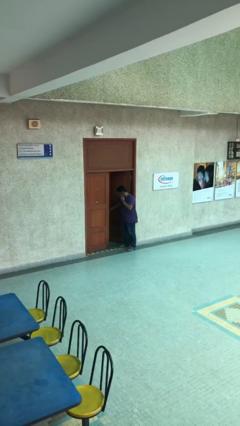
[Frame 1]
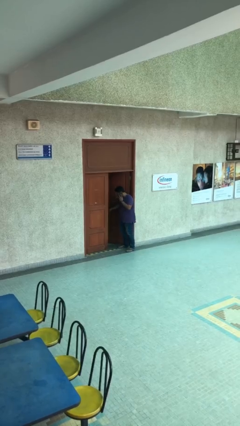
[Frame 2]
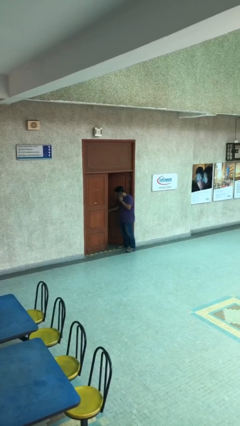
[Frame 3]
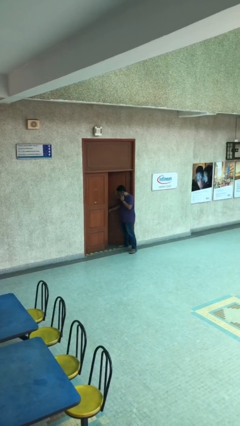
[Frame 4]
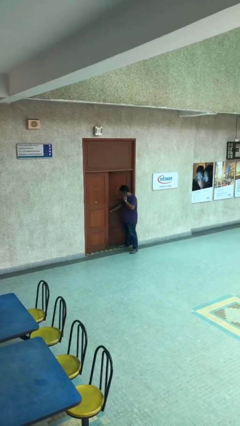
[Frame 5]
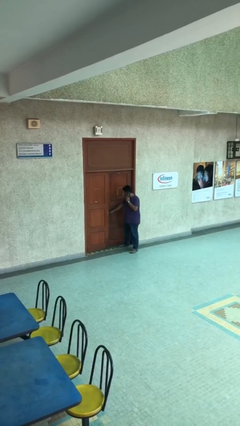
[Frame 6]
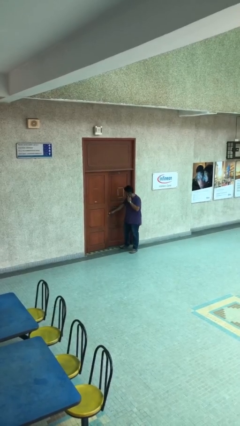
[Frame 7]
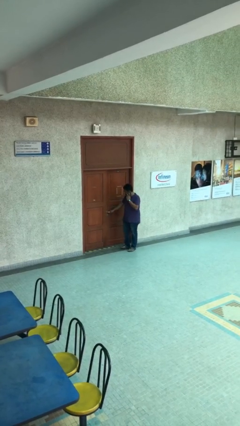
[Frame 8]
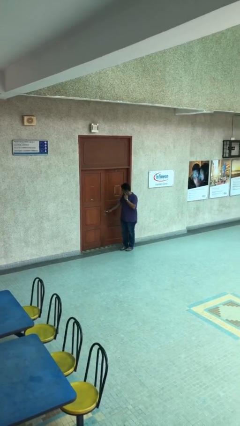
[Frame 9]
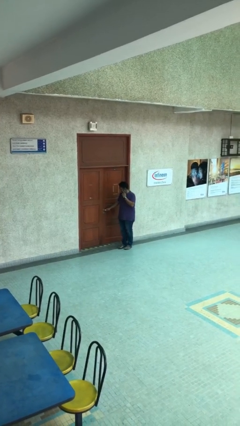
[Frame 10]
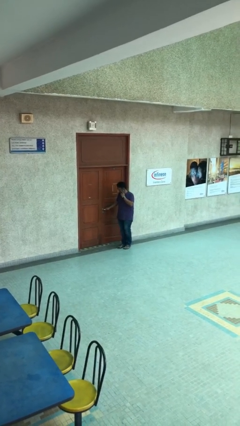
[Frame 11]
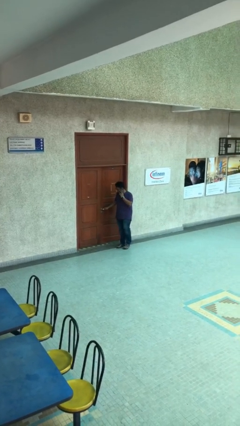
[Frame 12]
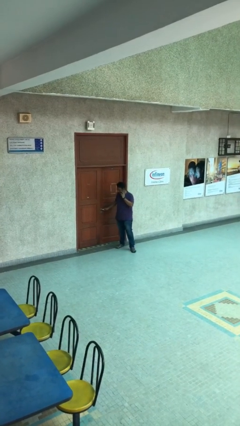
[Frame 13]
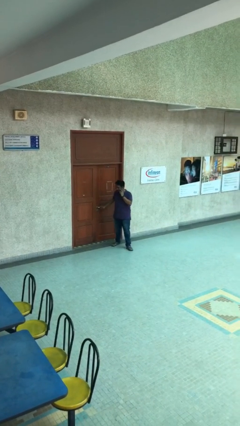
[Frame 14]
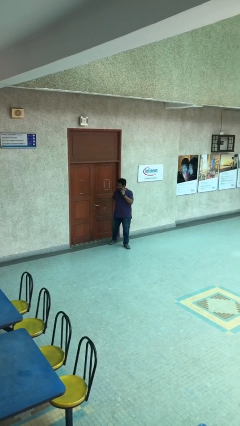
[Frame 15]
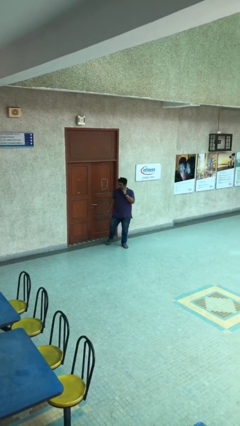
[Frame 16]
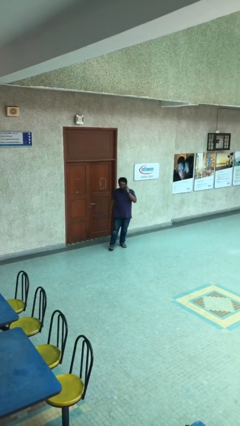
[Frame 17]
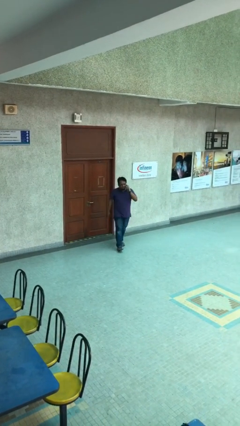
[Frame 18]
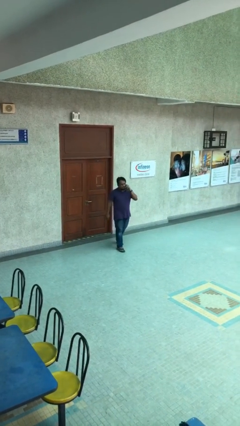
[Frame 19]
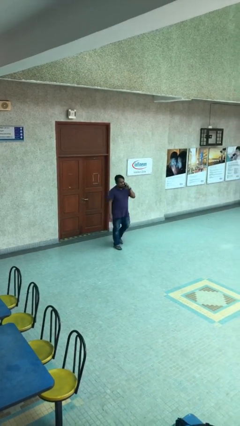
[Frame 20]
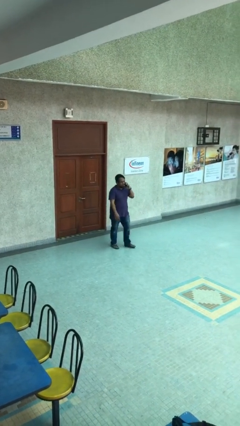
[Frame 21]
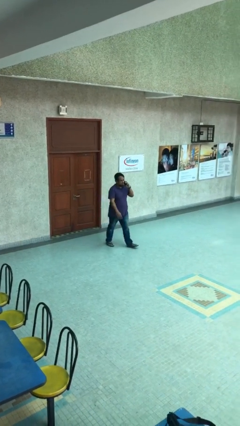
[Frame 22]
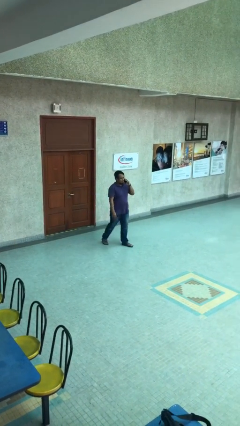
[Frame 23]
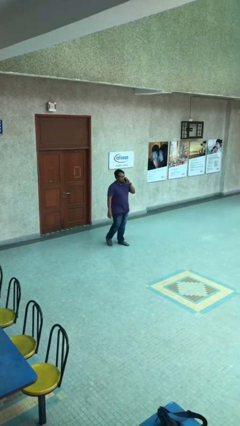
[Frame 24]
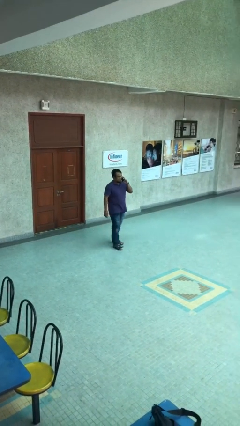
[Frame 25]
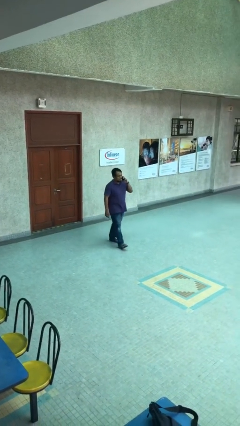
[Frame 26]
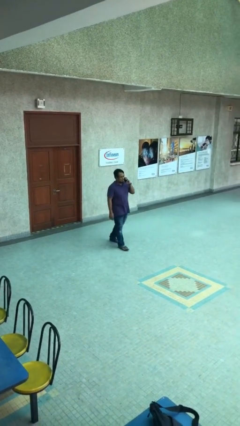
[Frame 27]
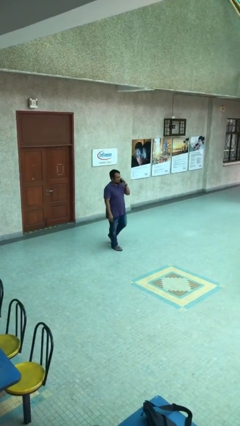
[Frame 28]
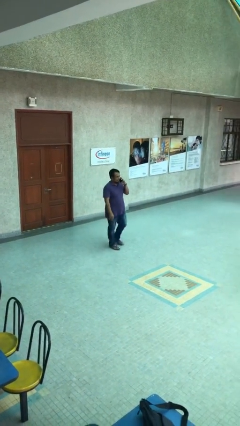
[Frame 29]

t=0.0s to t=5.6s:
person closes facility door

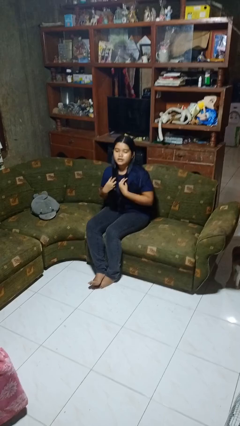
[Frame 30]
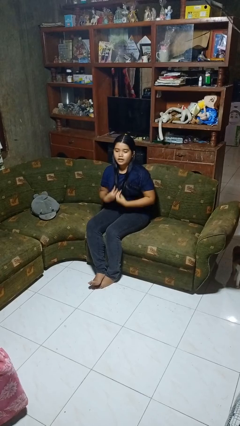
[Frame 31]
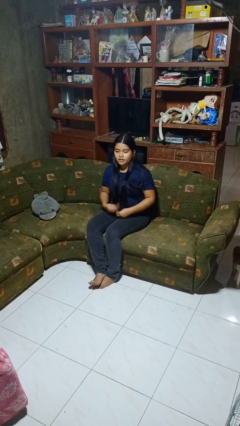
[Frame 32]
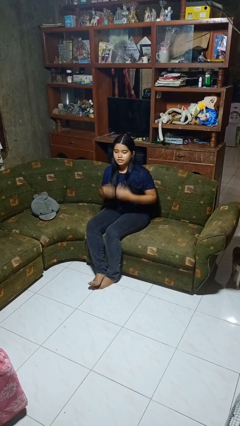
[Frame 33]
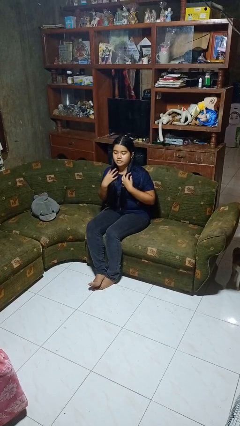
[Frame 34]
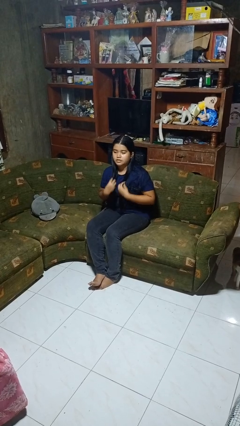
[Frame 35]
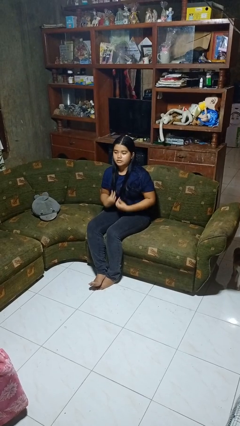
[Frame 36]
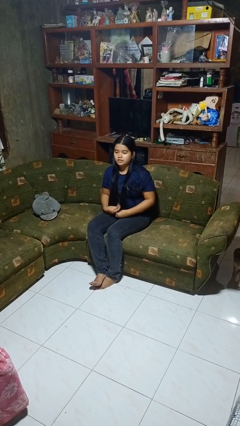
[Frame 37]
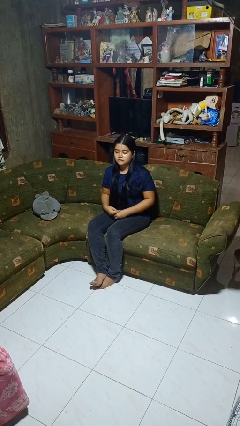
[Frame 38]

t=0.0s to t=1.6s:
person strokes hair

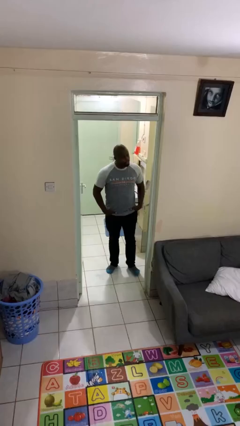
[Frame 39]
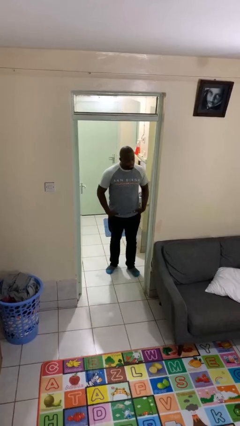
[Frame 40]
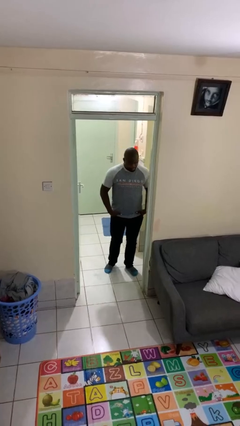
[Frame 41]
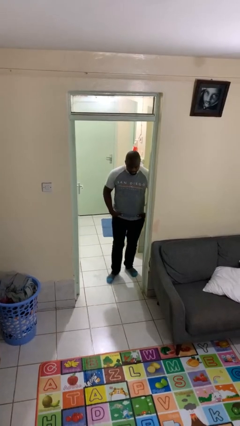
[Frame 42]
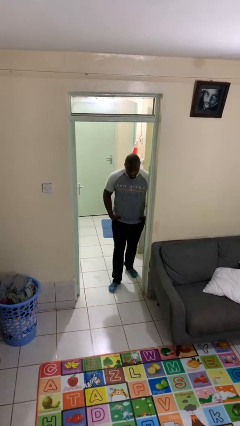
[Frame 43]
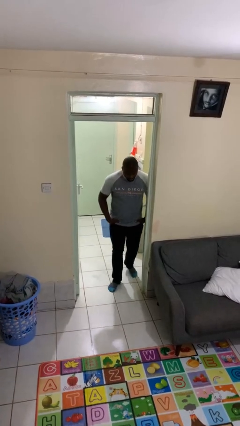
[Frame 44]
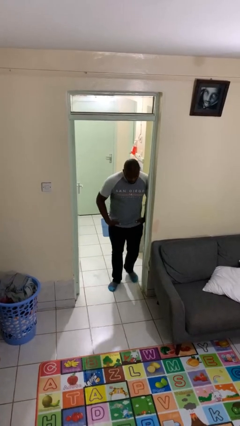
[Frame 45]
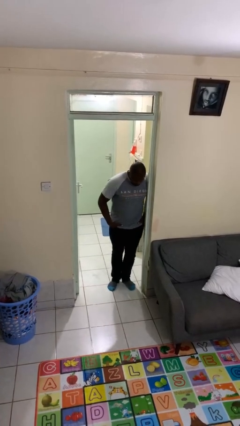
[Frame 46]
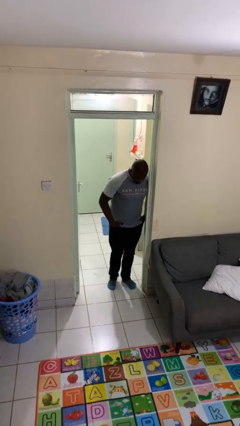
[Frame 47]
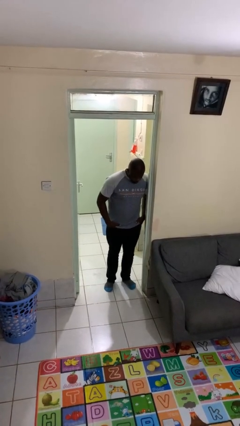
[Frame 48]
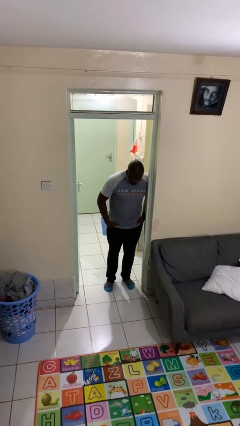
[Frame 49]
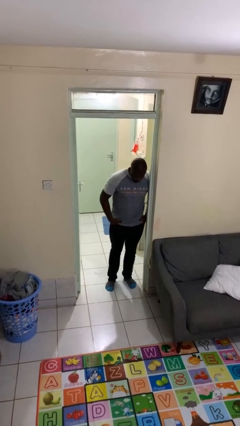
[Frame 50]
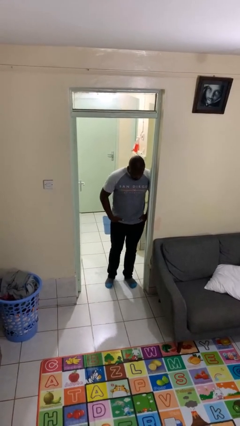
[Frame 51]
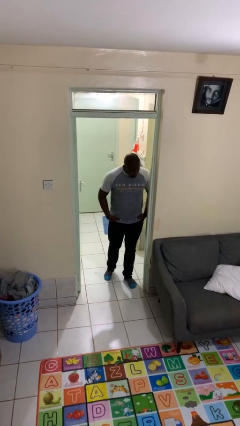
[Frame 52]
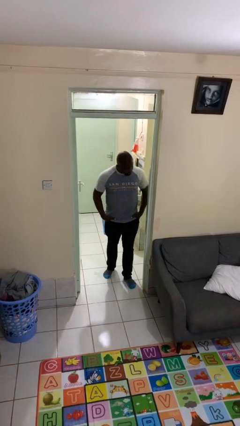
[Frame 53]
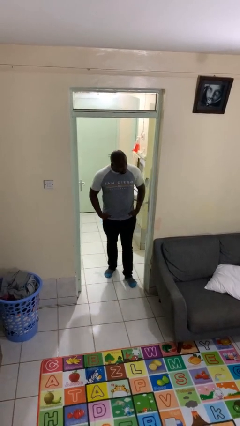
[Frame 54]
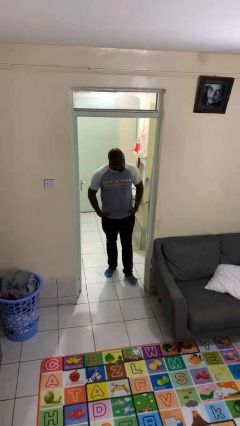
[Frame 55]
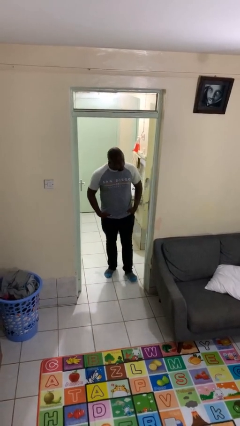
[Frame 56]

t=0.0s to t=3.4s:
person bumps into wall

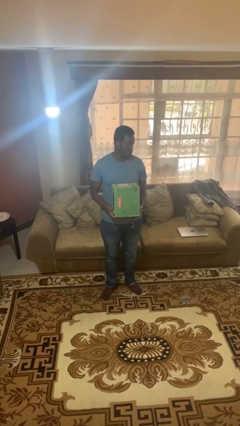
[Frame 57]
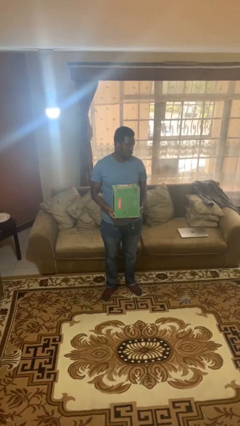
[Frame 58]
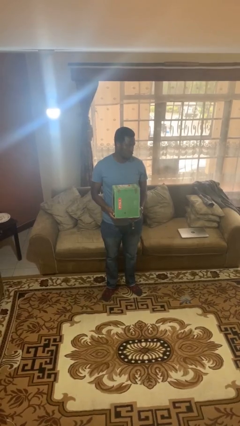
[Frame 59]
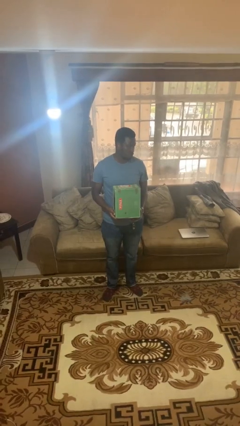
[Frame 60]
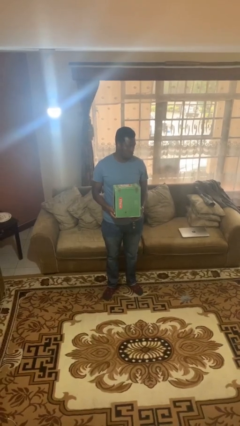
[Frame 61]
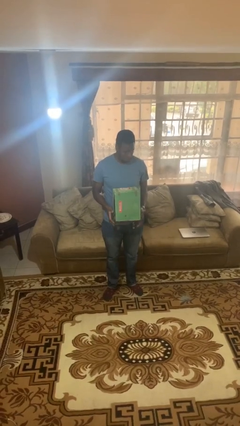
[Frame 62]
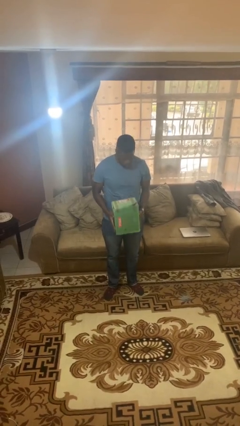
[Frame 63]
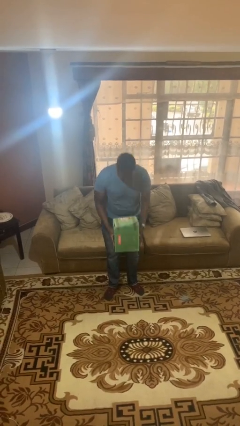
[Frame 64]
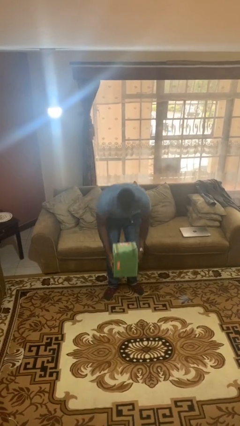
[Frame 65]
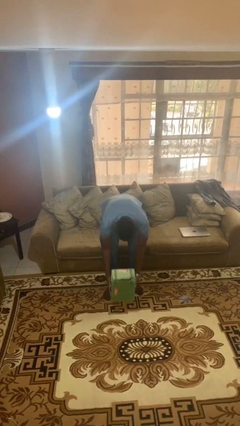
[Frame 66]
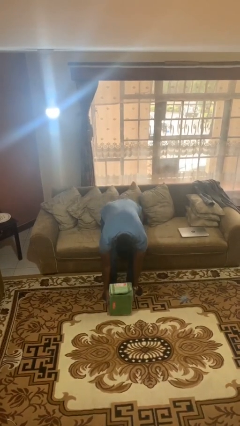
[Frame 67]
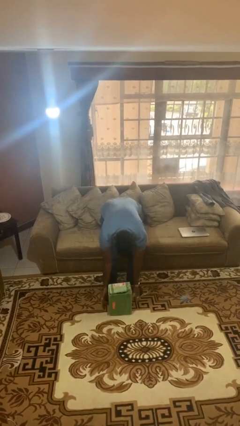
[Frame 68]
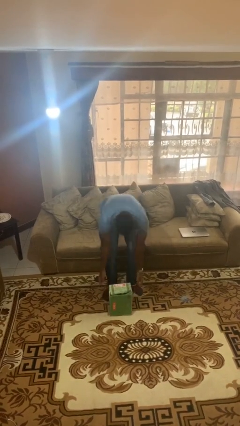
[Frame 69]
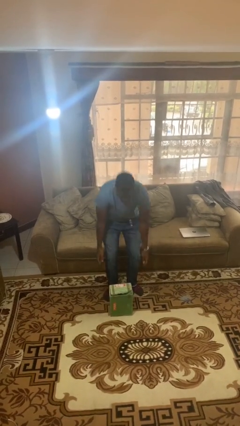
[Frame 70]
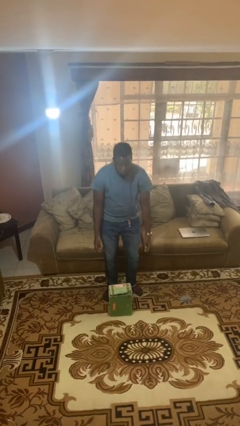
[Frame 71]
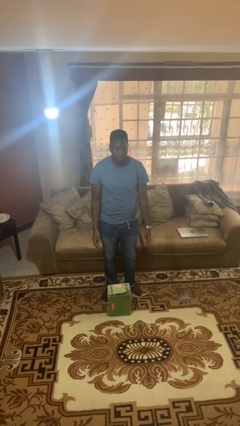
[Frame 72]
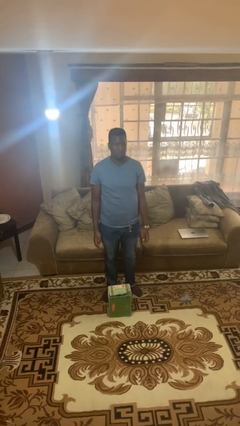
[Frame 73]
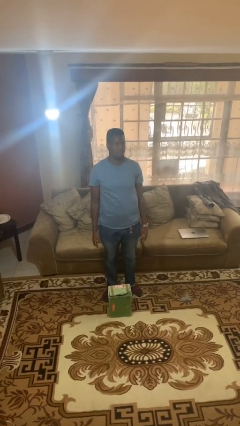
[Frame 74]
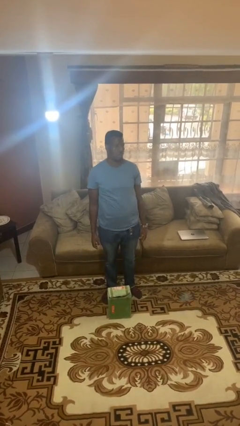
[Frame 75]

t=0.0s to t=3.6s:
person puts down object on floor

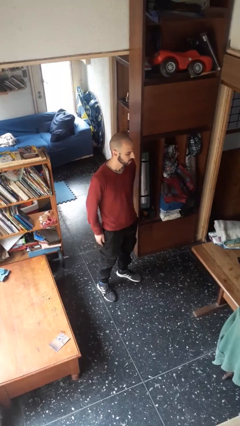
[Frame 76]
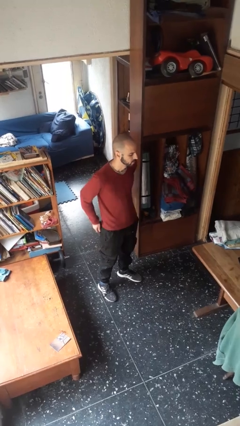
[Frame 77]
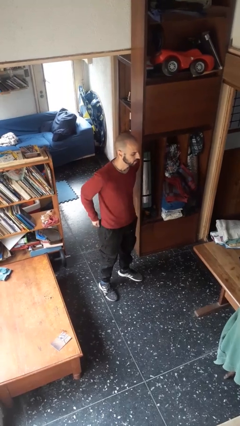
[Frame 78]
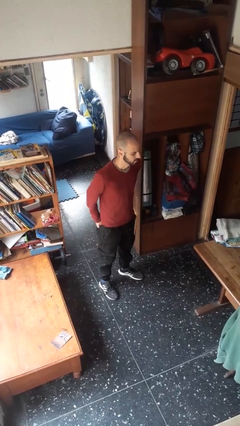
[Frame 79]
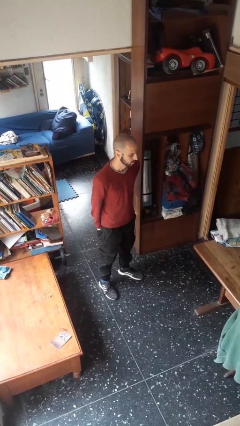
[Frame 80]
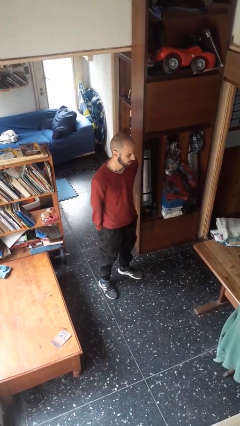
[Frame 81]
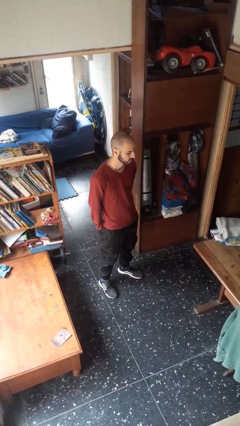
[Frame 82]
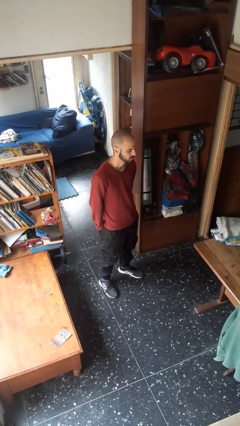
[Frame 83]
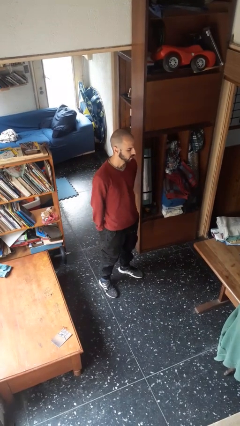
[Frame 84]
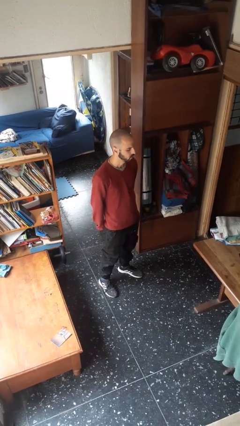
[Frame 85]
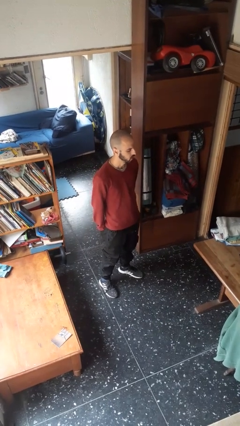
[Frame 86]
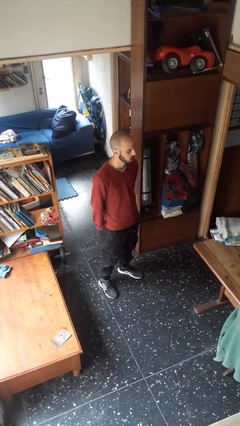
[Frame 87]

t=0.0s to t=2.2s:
person puts hands in back pockets

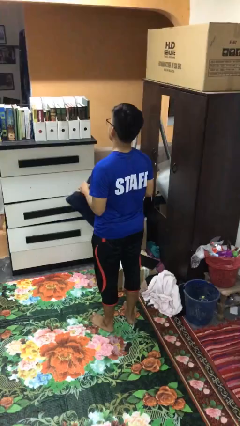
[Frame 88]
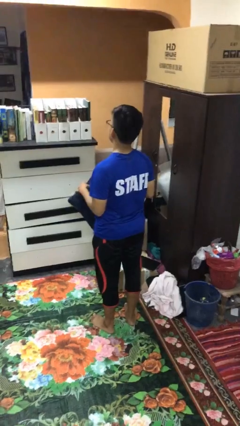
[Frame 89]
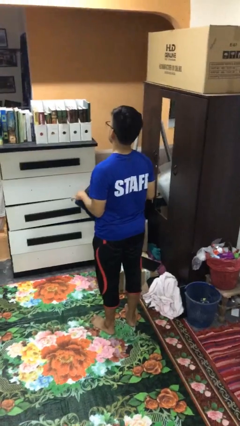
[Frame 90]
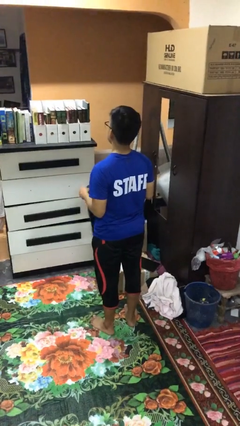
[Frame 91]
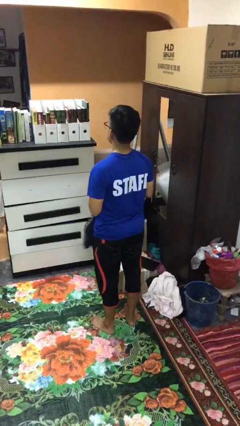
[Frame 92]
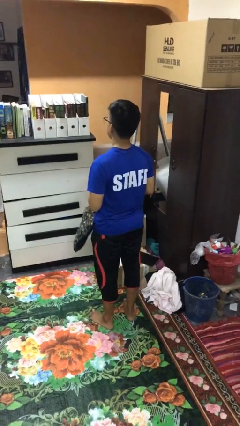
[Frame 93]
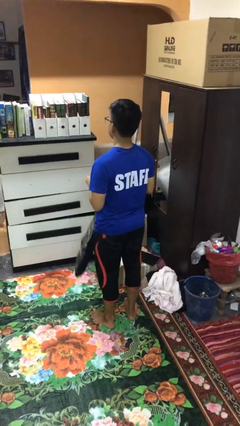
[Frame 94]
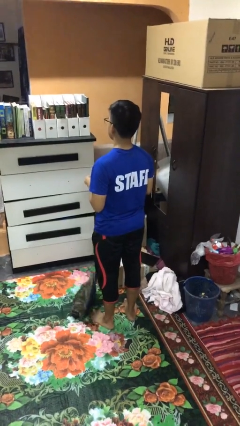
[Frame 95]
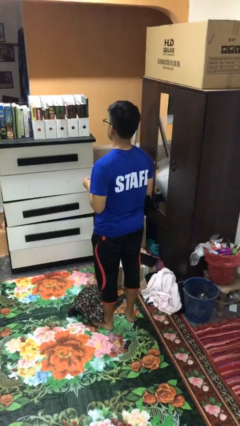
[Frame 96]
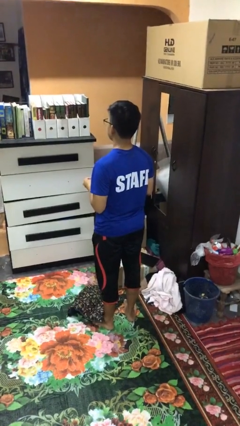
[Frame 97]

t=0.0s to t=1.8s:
person drops object
